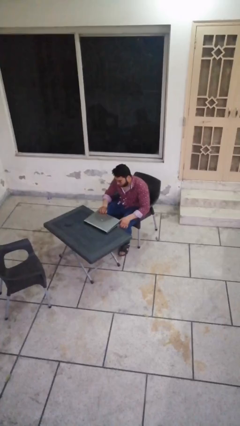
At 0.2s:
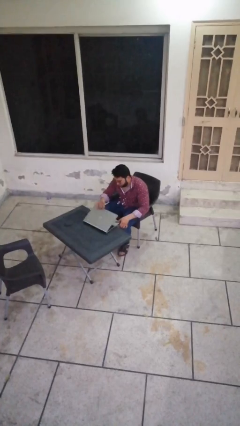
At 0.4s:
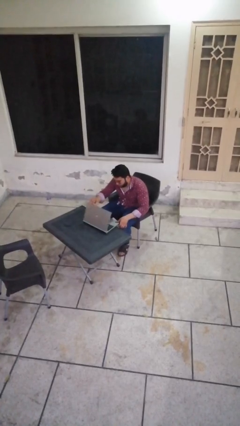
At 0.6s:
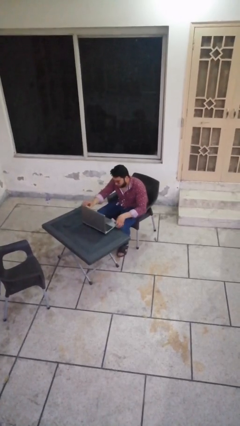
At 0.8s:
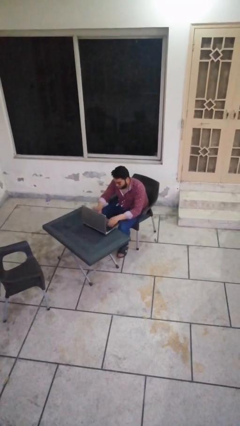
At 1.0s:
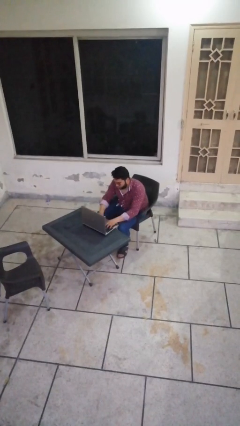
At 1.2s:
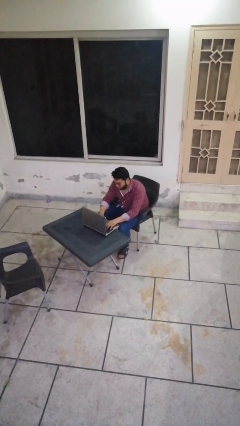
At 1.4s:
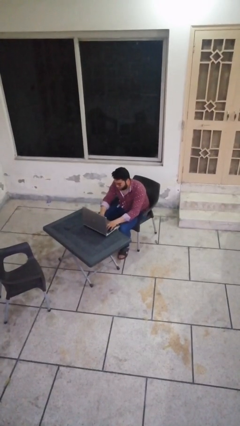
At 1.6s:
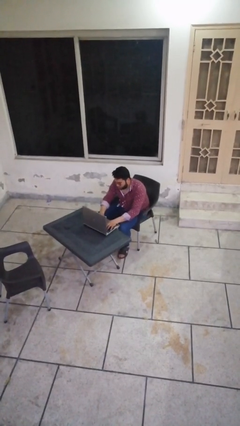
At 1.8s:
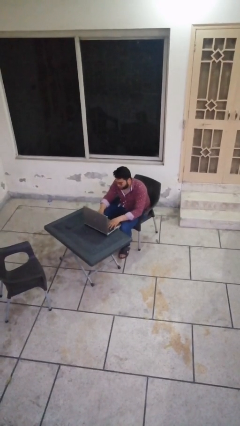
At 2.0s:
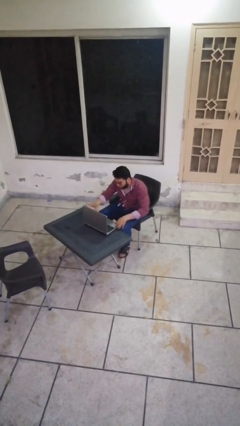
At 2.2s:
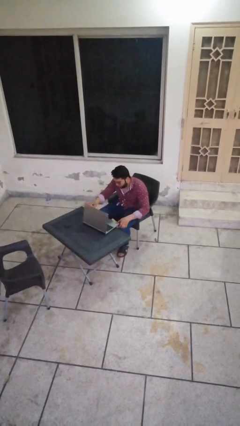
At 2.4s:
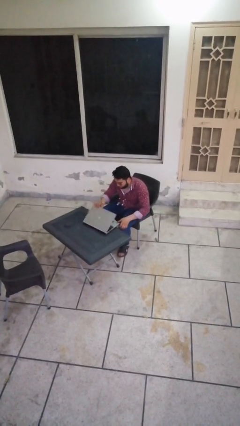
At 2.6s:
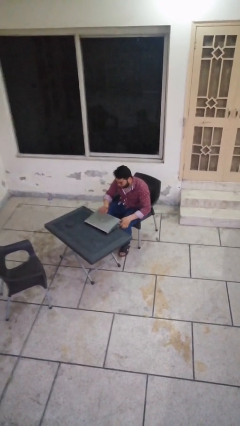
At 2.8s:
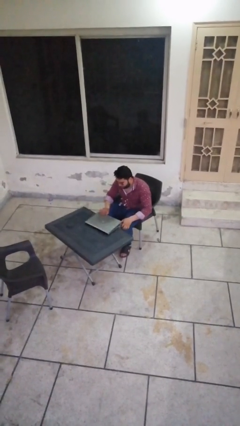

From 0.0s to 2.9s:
person interacts with laptop

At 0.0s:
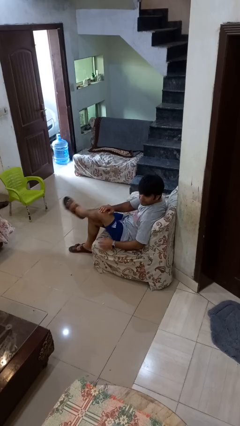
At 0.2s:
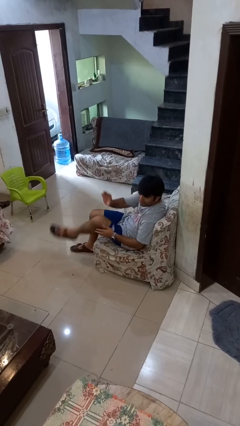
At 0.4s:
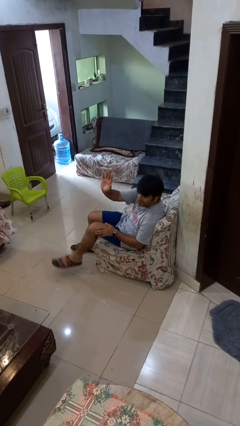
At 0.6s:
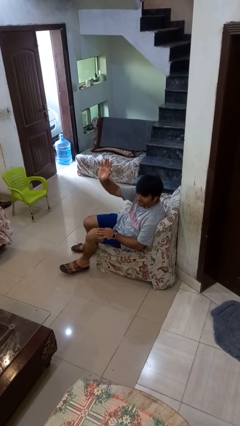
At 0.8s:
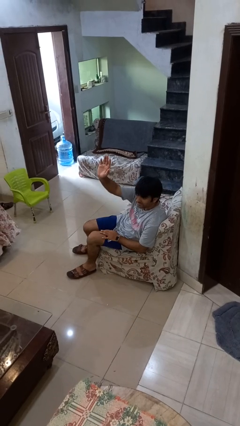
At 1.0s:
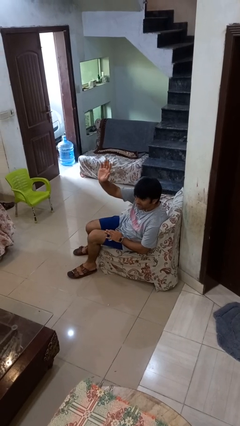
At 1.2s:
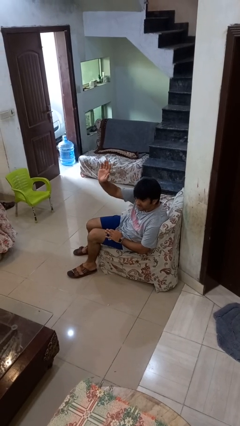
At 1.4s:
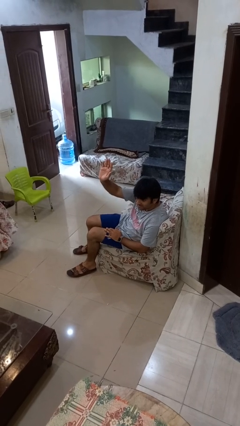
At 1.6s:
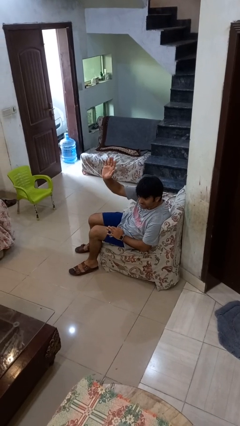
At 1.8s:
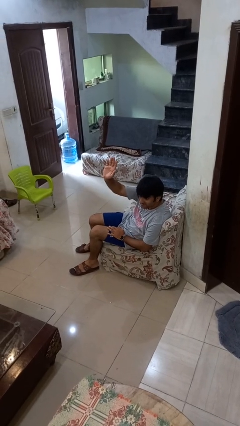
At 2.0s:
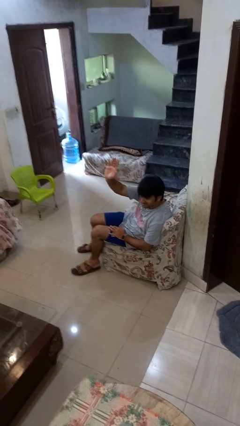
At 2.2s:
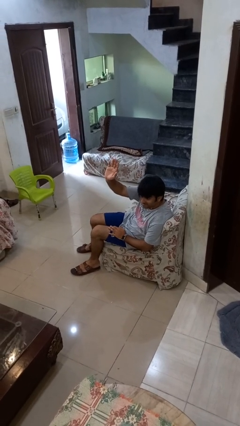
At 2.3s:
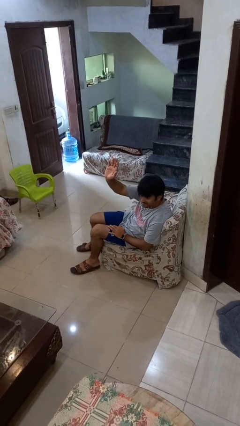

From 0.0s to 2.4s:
person gestures raise hand

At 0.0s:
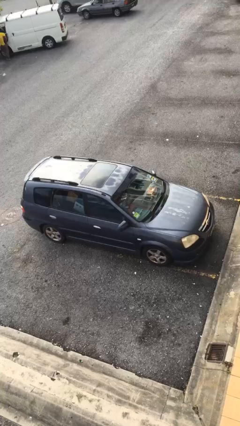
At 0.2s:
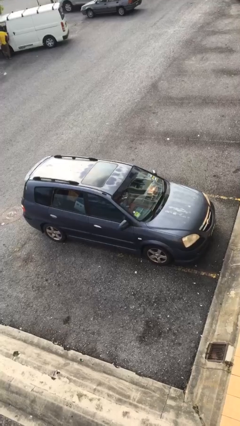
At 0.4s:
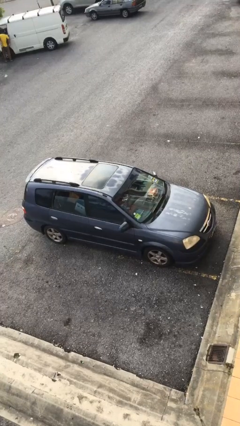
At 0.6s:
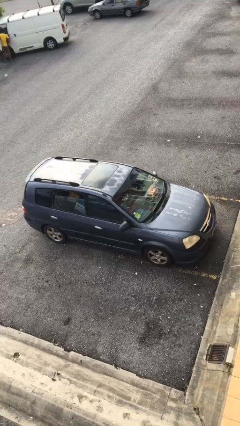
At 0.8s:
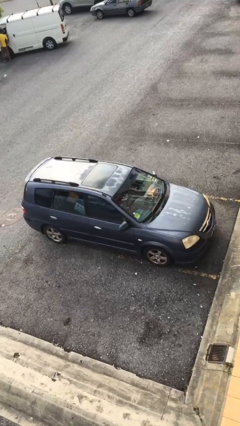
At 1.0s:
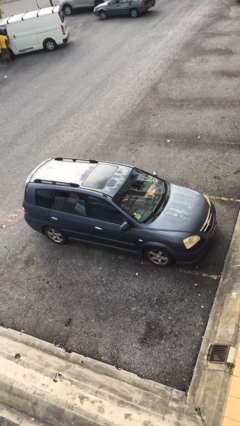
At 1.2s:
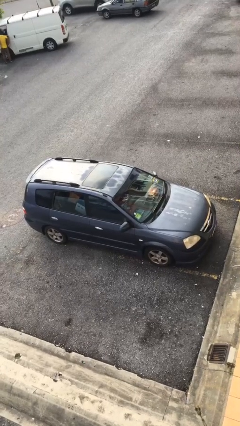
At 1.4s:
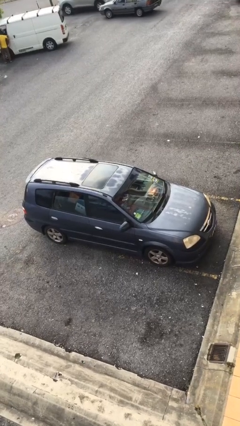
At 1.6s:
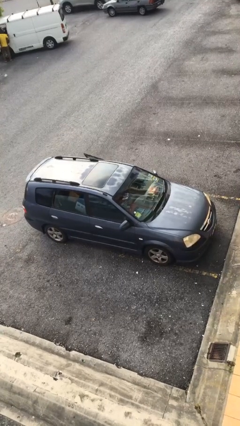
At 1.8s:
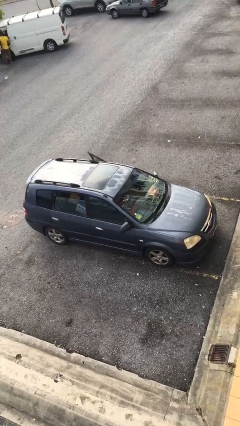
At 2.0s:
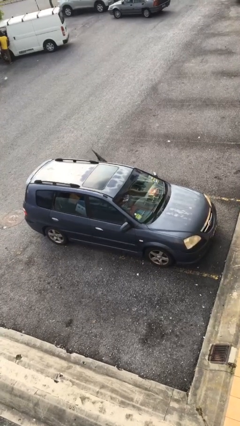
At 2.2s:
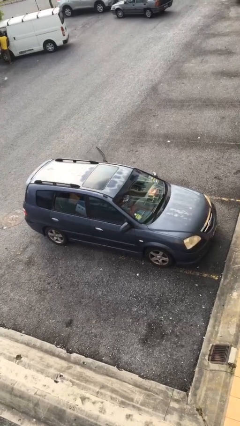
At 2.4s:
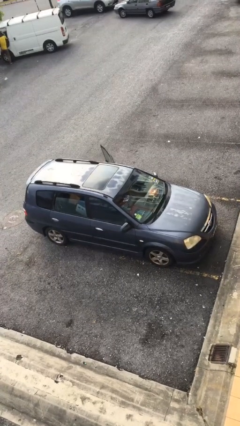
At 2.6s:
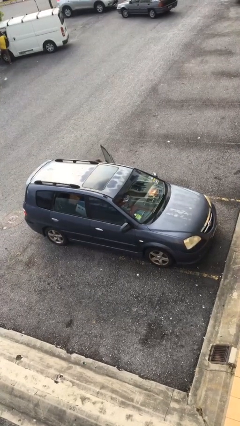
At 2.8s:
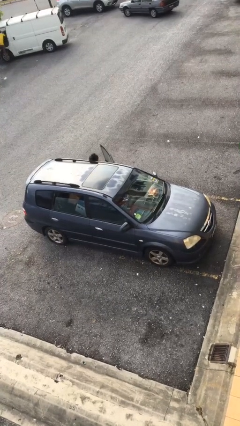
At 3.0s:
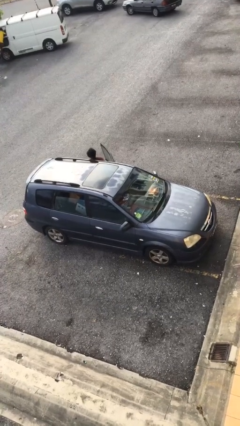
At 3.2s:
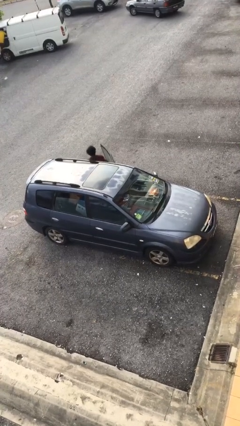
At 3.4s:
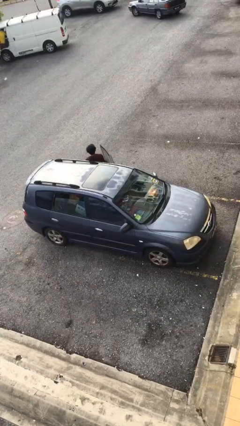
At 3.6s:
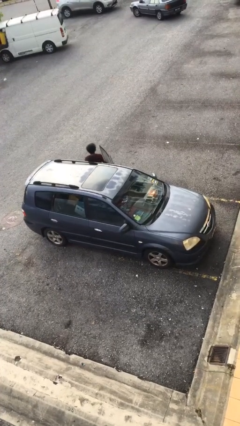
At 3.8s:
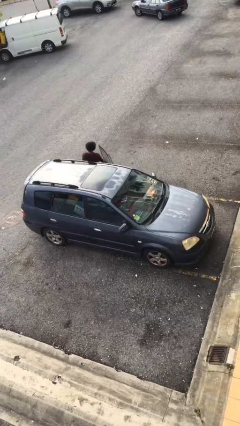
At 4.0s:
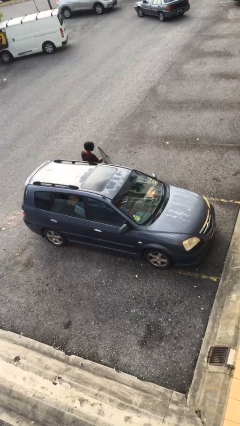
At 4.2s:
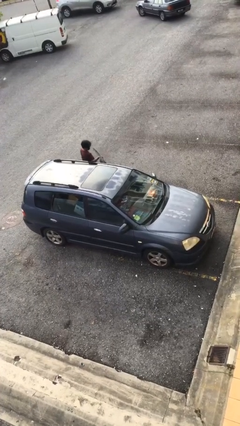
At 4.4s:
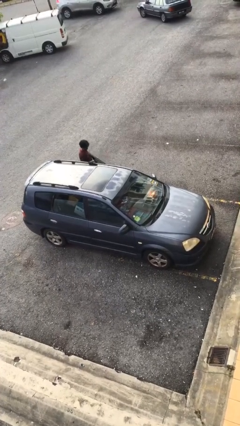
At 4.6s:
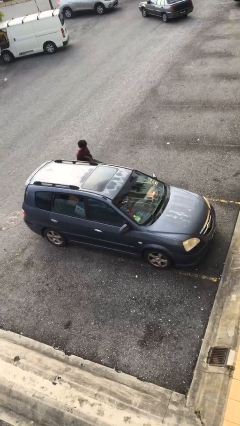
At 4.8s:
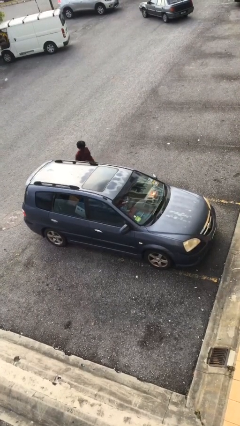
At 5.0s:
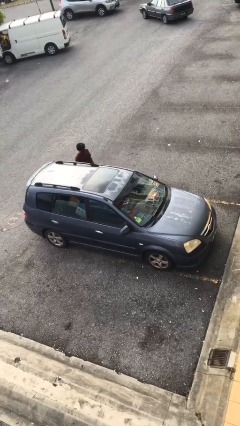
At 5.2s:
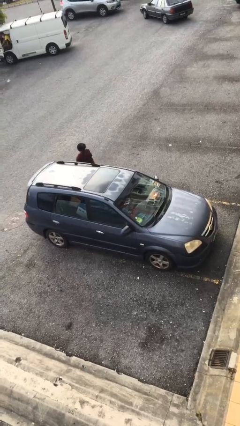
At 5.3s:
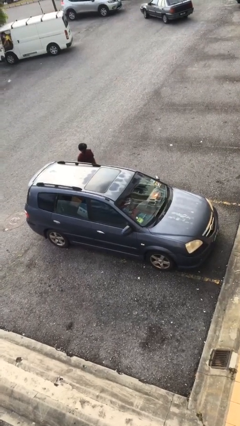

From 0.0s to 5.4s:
car drops off person

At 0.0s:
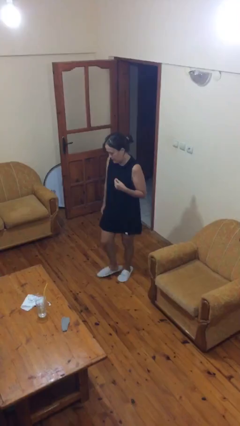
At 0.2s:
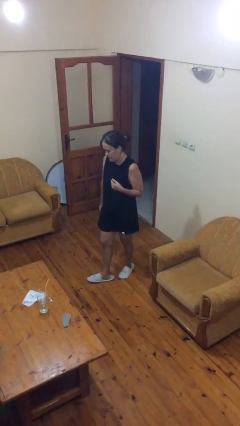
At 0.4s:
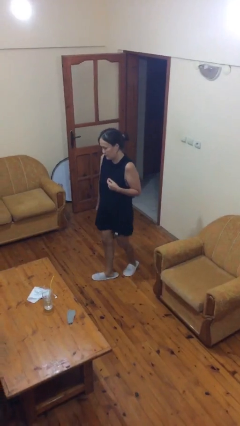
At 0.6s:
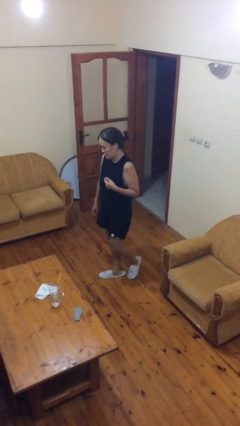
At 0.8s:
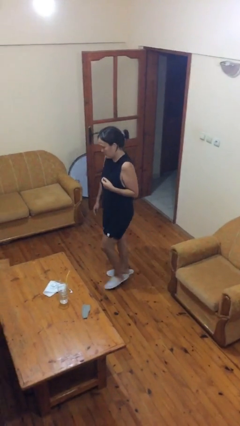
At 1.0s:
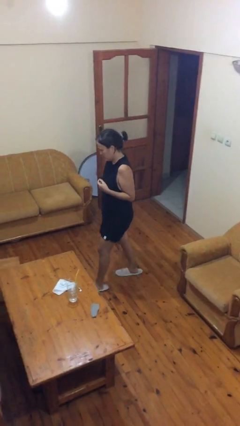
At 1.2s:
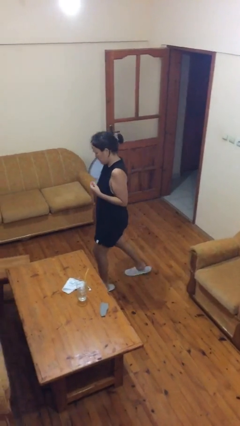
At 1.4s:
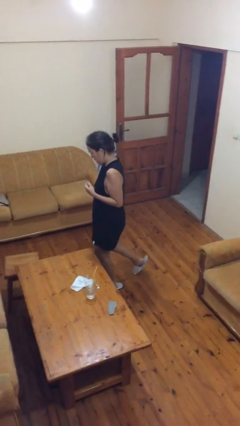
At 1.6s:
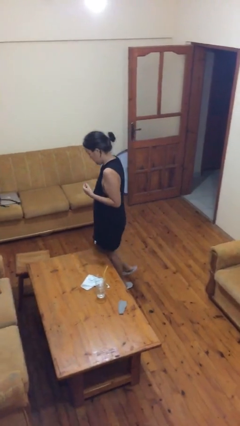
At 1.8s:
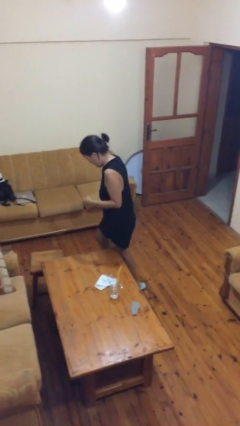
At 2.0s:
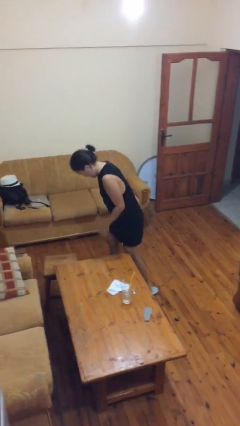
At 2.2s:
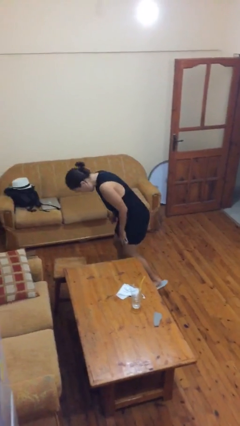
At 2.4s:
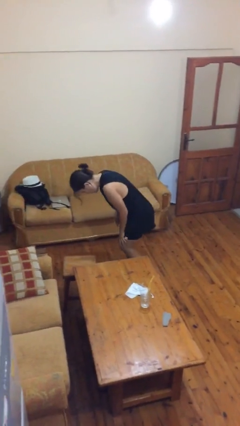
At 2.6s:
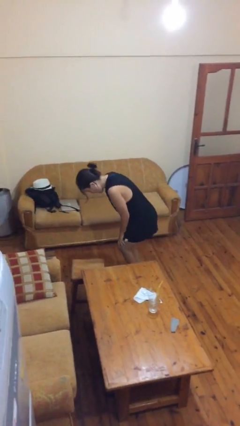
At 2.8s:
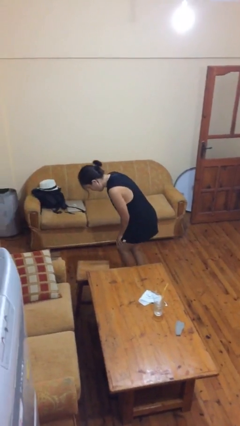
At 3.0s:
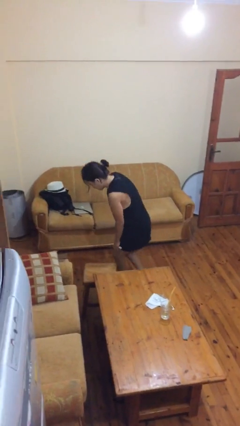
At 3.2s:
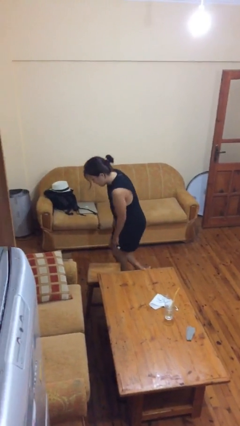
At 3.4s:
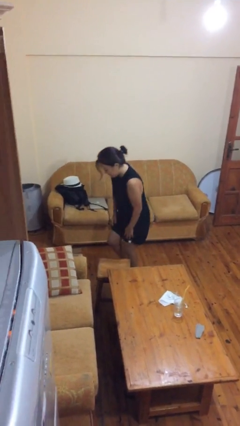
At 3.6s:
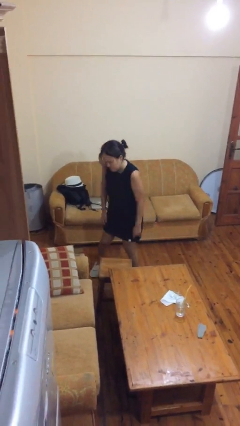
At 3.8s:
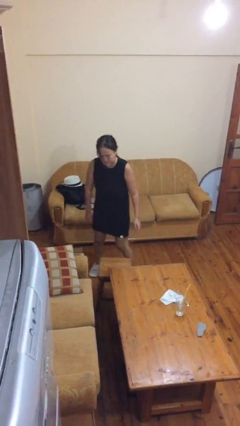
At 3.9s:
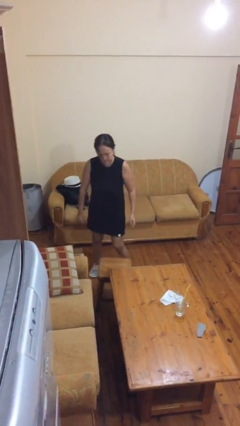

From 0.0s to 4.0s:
person bumps into table

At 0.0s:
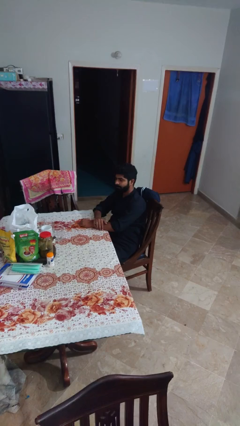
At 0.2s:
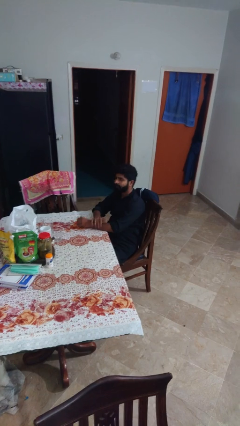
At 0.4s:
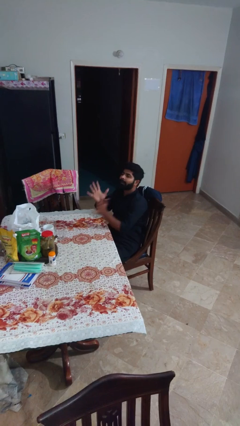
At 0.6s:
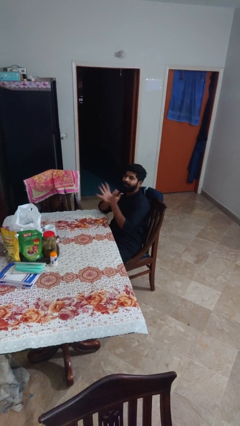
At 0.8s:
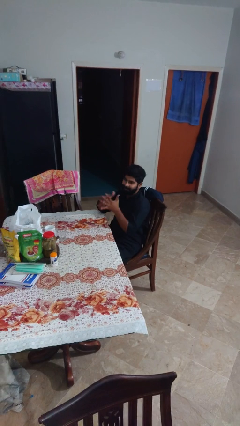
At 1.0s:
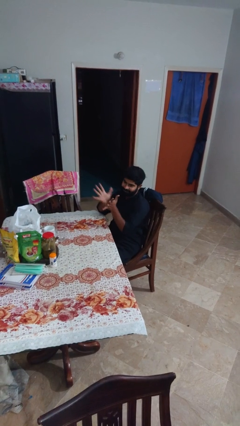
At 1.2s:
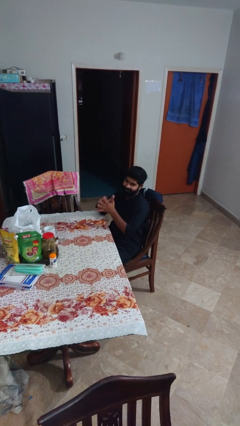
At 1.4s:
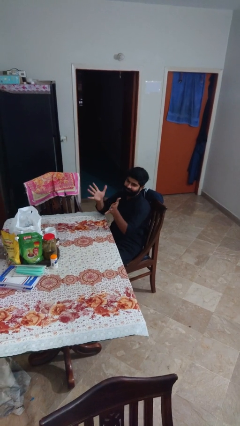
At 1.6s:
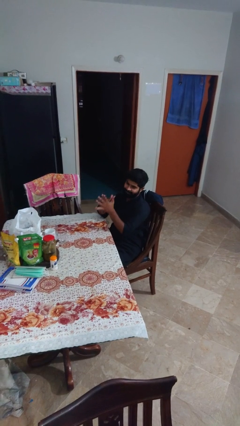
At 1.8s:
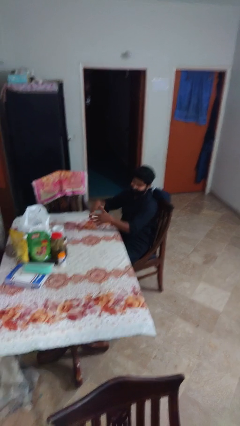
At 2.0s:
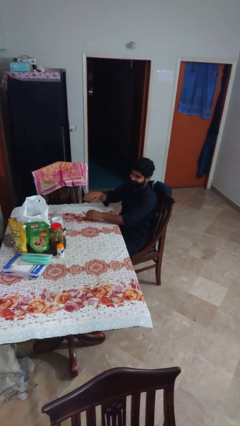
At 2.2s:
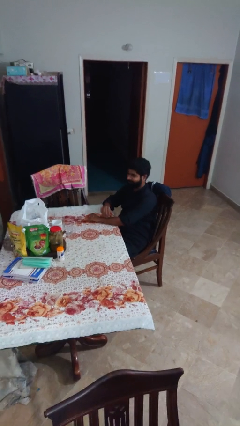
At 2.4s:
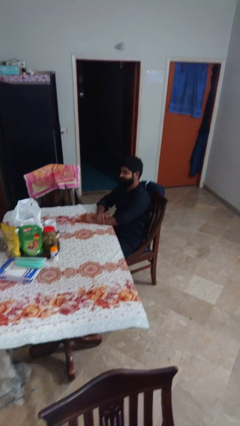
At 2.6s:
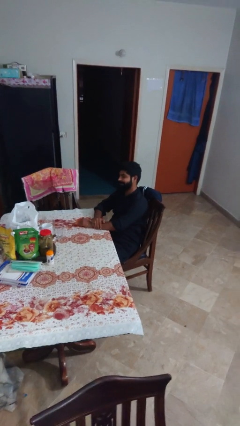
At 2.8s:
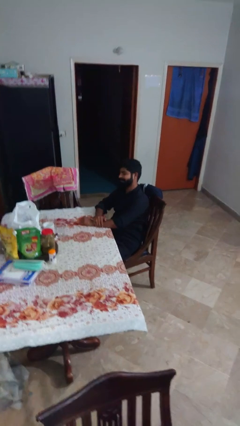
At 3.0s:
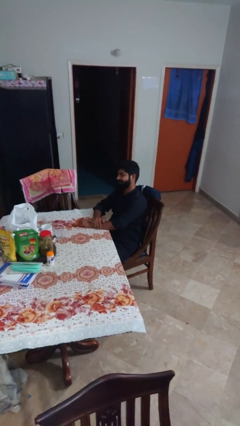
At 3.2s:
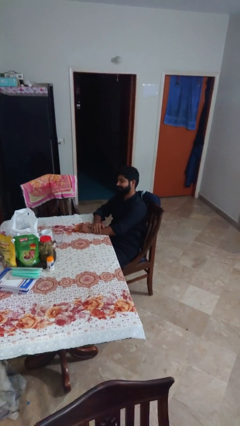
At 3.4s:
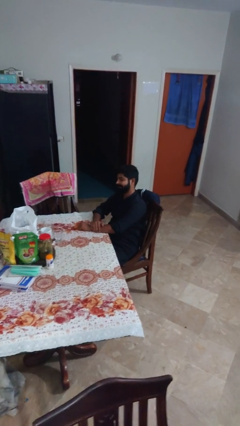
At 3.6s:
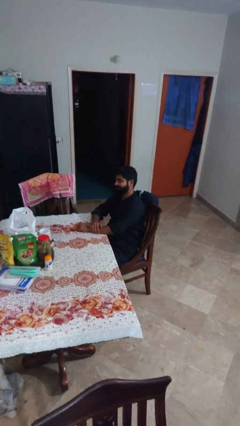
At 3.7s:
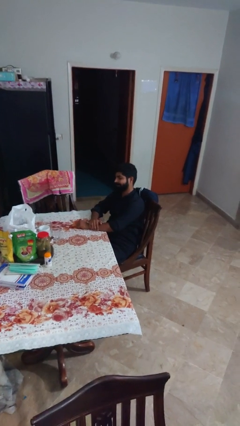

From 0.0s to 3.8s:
person claps hands
